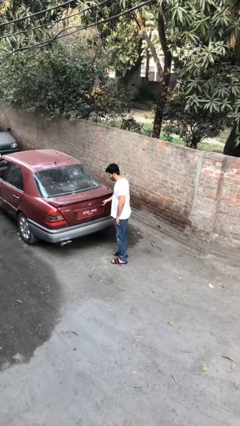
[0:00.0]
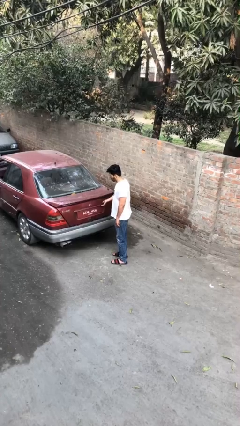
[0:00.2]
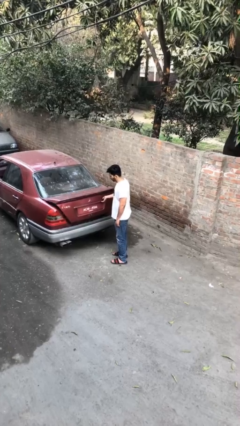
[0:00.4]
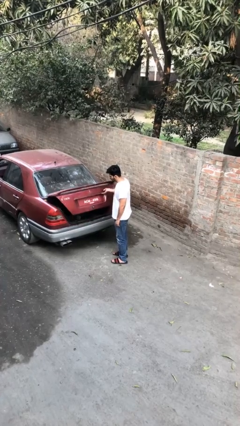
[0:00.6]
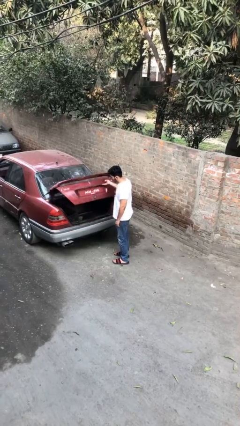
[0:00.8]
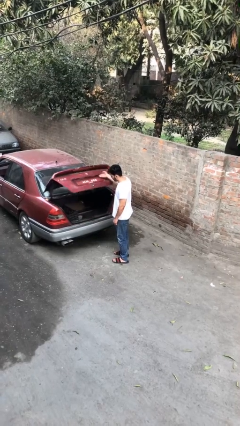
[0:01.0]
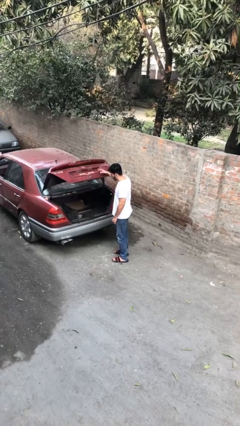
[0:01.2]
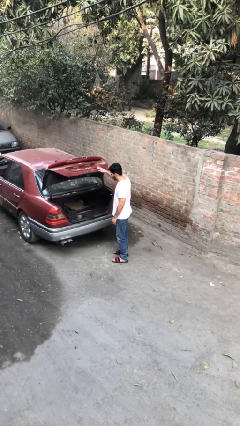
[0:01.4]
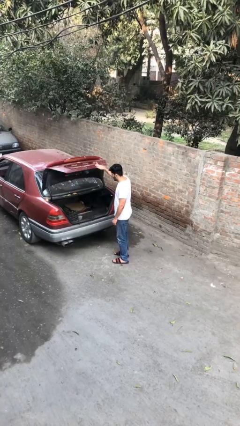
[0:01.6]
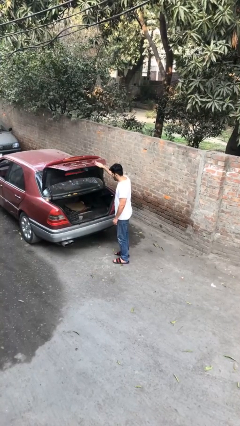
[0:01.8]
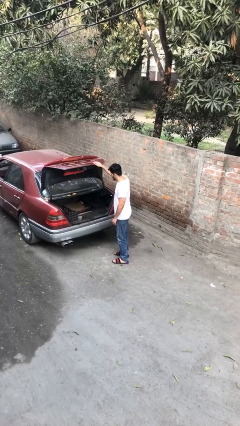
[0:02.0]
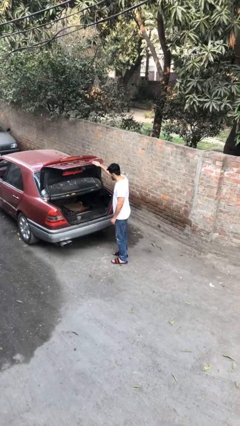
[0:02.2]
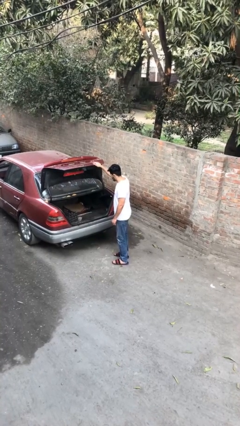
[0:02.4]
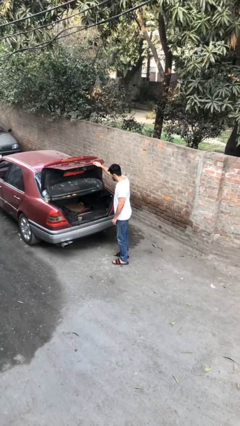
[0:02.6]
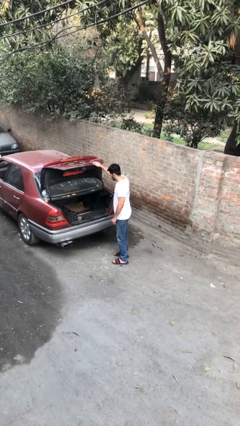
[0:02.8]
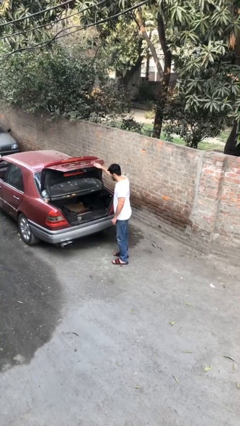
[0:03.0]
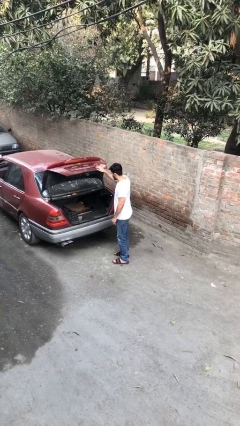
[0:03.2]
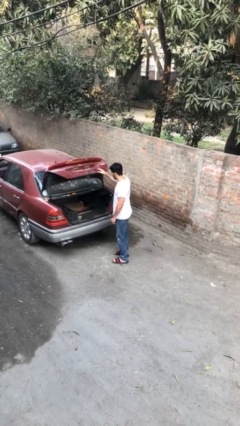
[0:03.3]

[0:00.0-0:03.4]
person opens car trunk

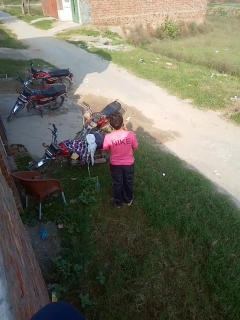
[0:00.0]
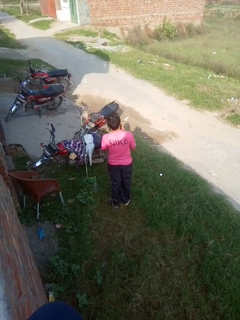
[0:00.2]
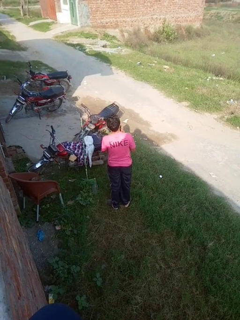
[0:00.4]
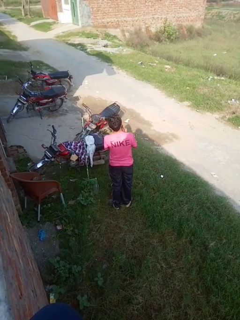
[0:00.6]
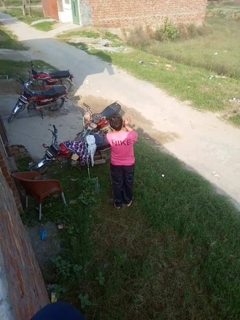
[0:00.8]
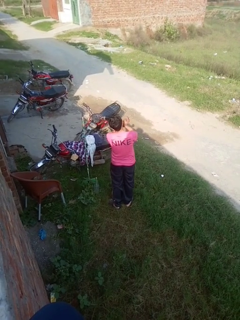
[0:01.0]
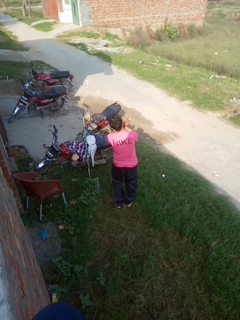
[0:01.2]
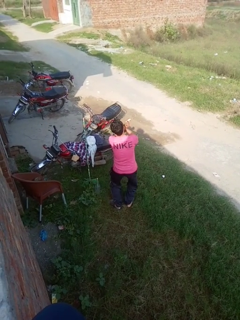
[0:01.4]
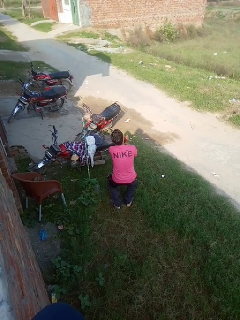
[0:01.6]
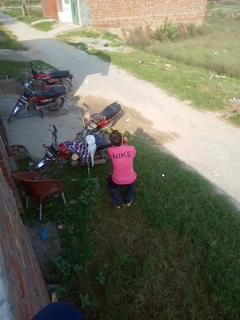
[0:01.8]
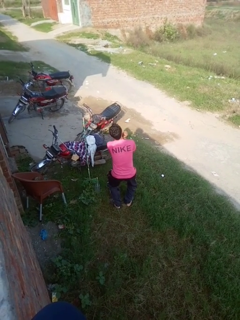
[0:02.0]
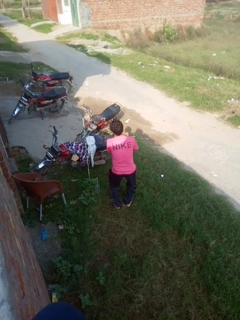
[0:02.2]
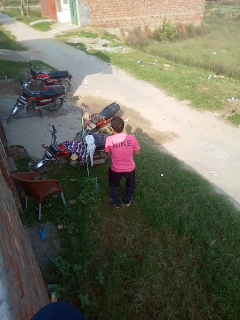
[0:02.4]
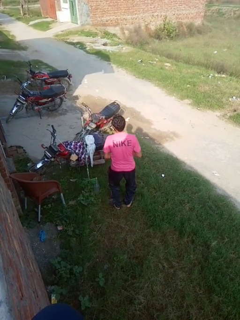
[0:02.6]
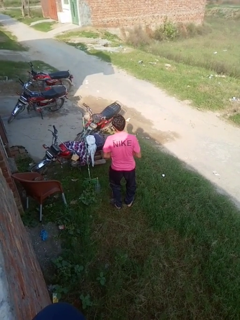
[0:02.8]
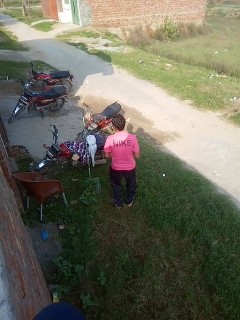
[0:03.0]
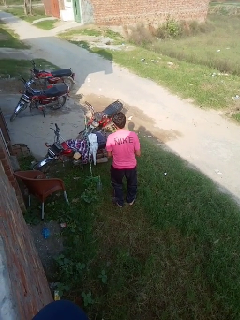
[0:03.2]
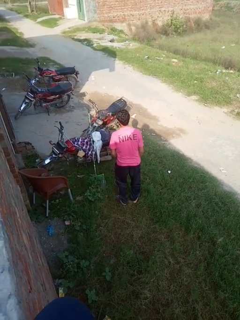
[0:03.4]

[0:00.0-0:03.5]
person karate chop

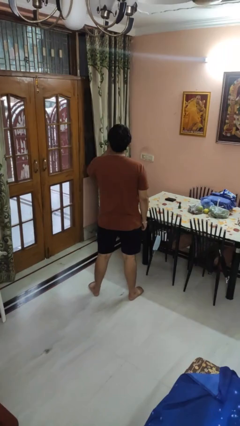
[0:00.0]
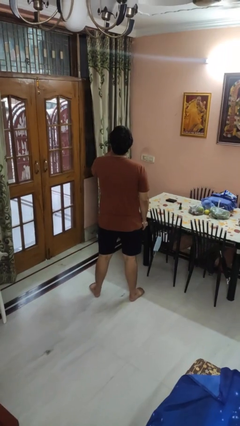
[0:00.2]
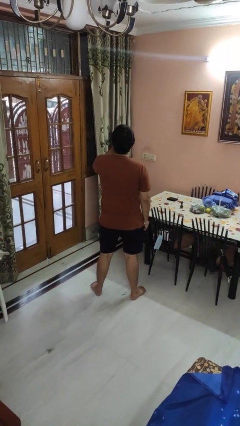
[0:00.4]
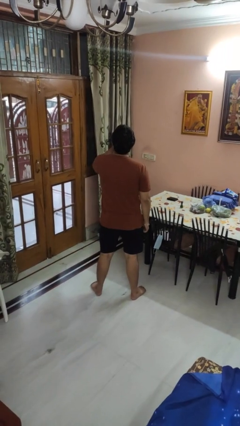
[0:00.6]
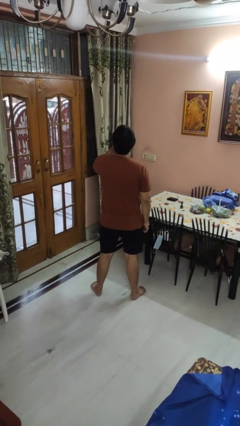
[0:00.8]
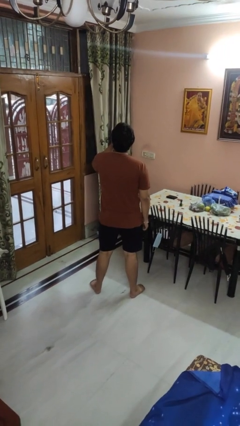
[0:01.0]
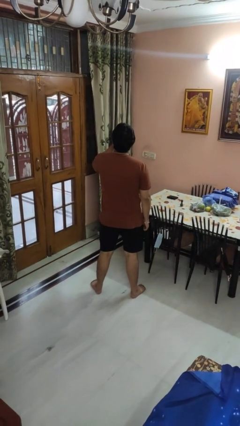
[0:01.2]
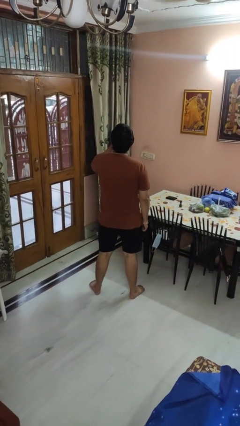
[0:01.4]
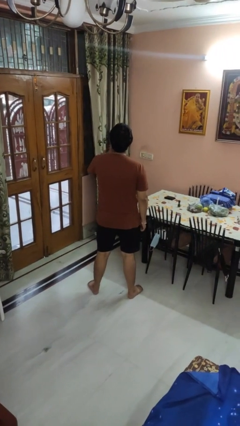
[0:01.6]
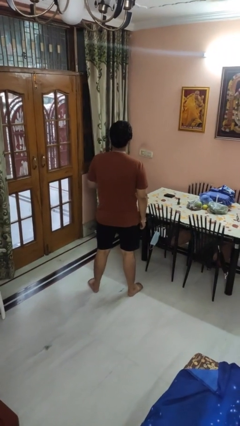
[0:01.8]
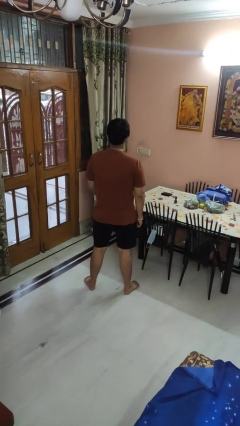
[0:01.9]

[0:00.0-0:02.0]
person strokes chin

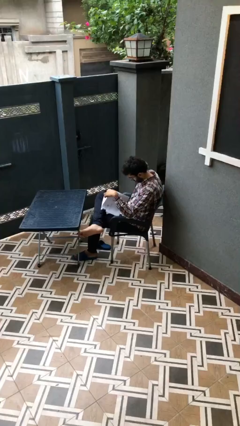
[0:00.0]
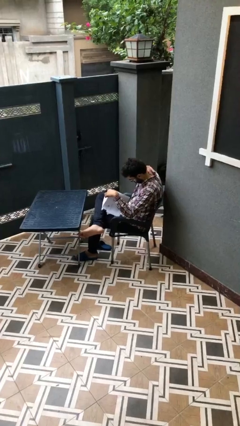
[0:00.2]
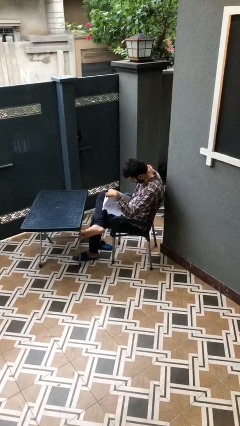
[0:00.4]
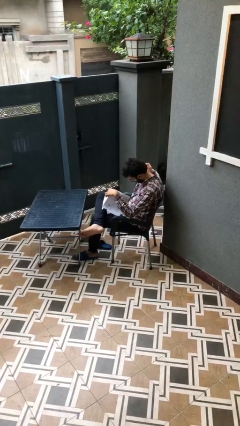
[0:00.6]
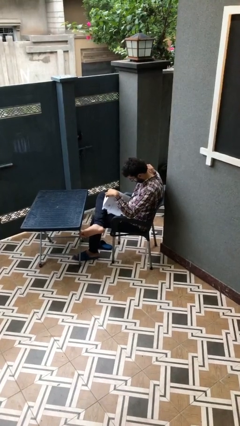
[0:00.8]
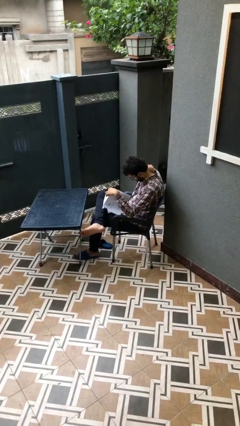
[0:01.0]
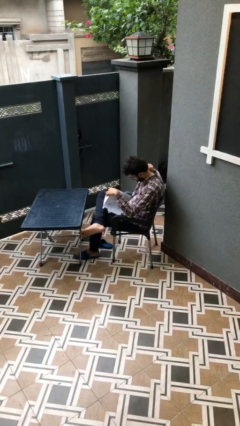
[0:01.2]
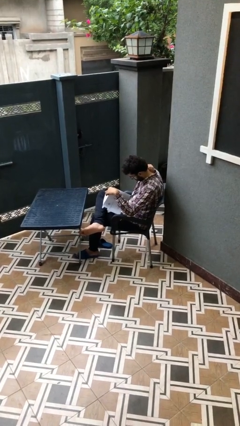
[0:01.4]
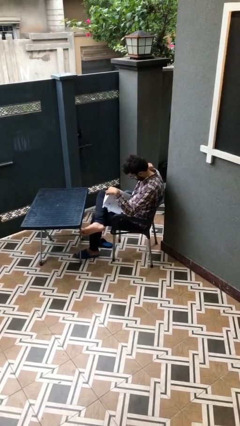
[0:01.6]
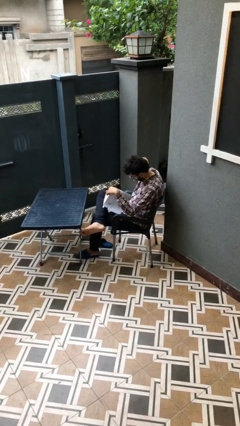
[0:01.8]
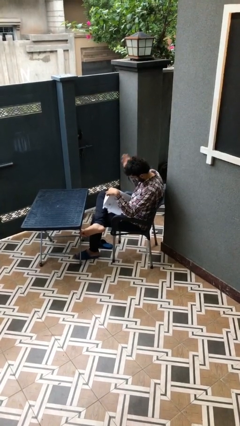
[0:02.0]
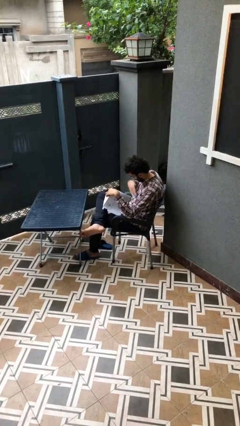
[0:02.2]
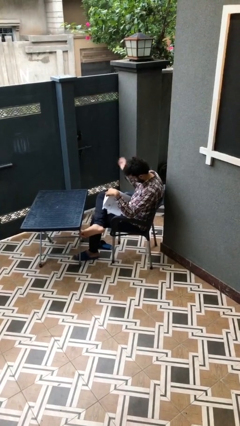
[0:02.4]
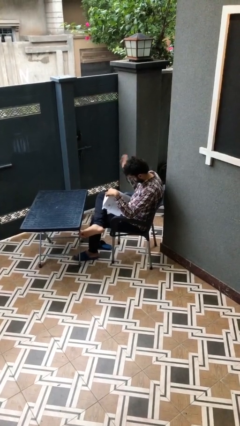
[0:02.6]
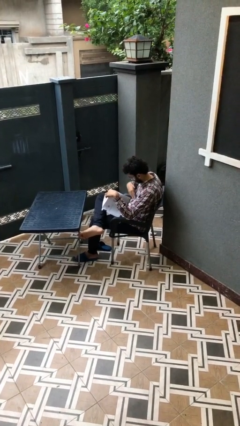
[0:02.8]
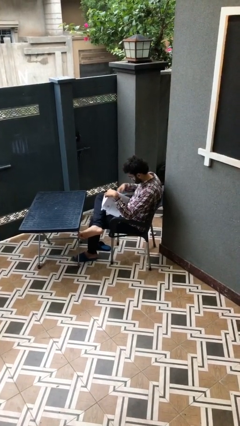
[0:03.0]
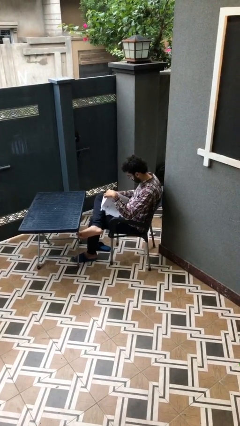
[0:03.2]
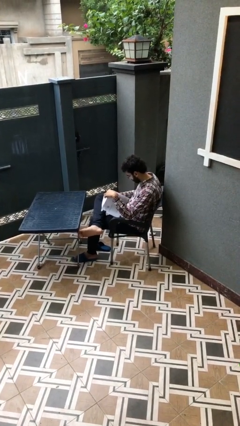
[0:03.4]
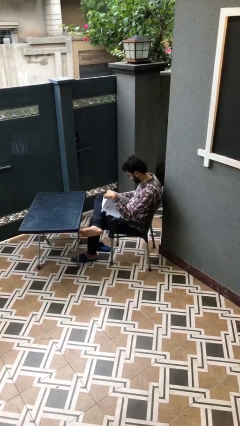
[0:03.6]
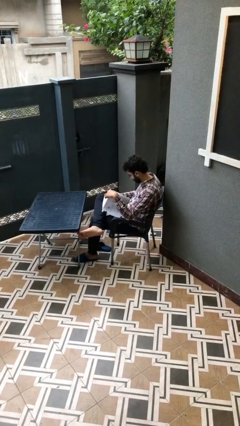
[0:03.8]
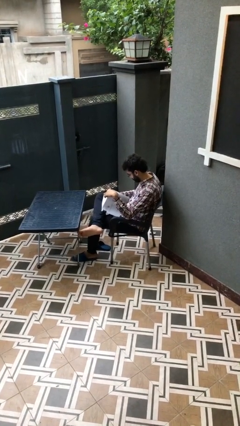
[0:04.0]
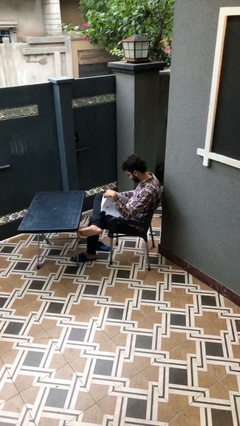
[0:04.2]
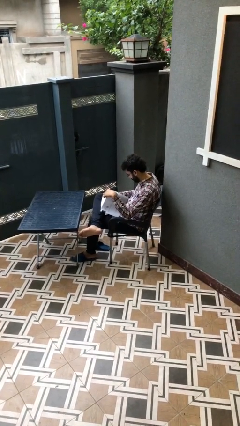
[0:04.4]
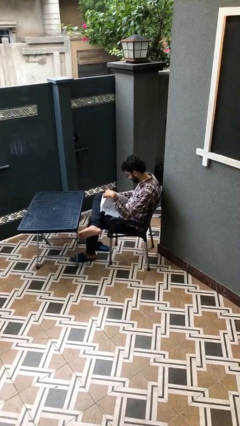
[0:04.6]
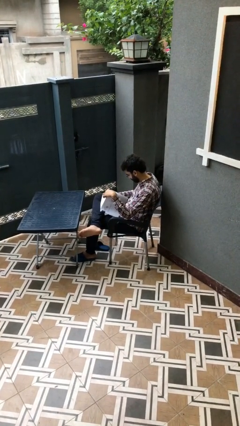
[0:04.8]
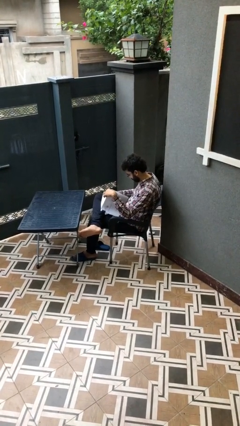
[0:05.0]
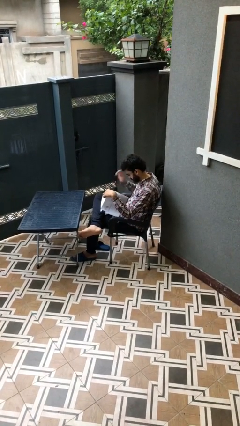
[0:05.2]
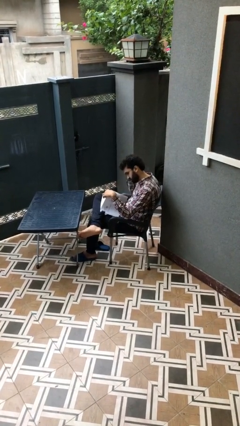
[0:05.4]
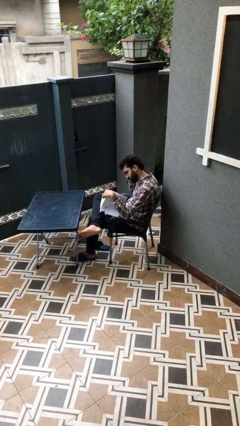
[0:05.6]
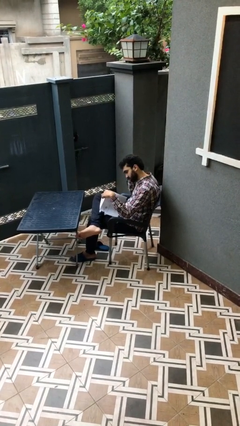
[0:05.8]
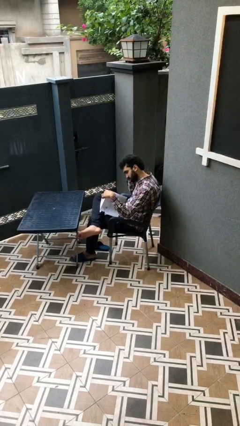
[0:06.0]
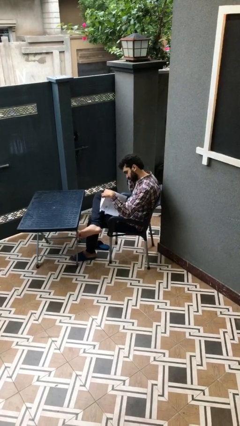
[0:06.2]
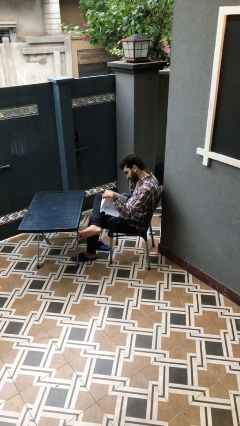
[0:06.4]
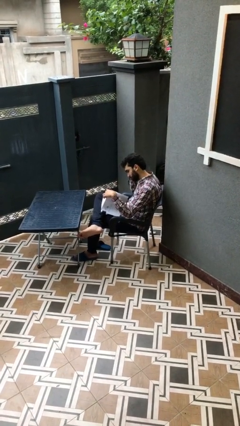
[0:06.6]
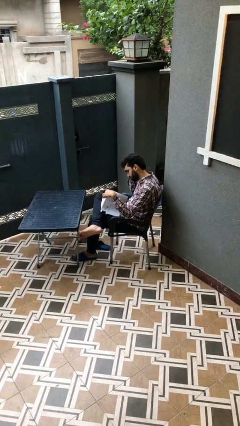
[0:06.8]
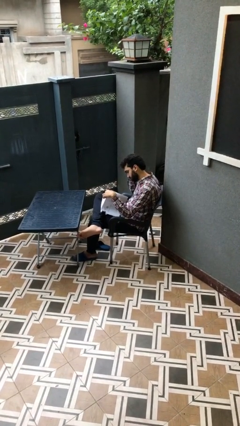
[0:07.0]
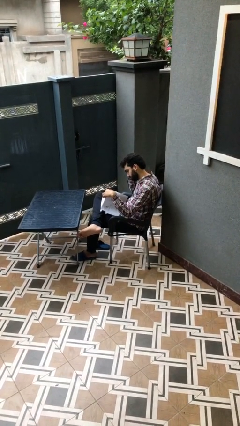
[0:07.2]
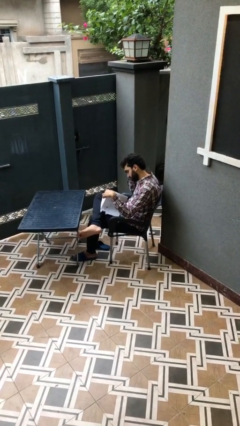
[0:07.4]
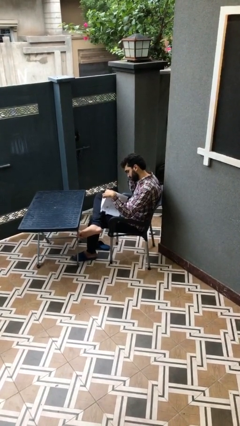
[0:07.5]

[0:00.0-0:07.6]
person reads document

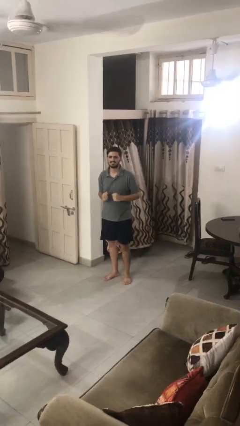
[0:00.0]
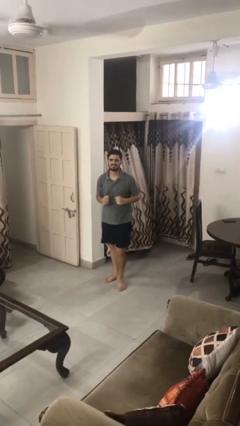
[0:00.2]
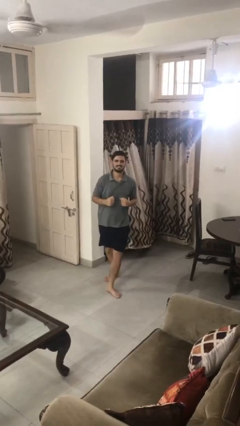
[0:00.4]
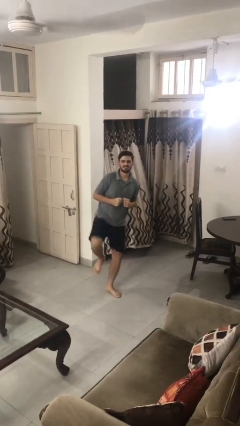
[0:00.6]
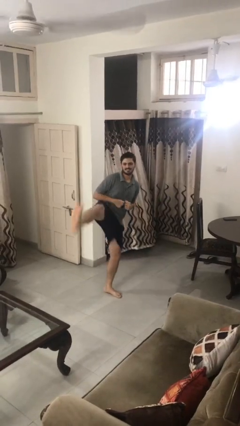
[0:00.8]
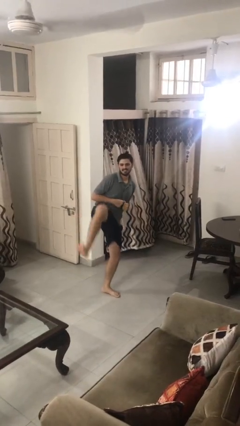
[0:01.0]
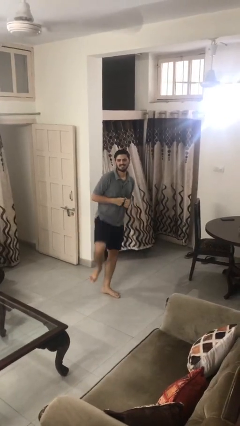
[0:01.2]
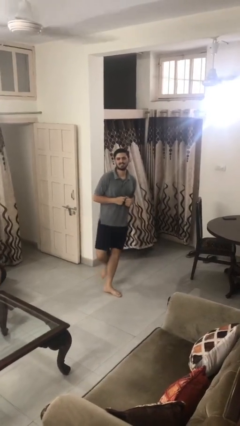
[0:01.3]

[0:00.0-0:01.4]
person karate kicks

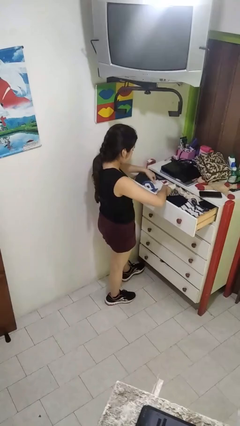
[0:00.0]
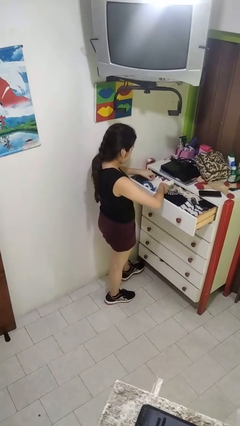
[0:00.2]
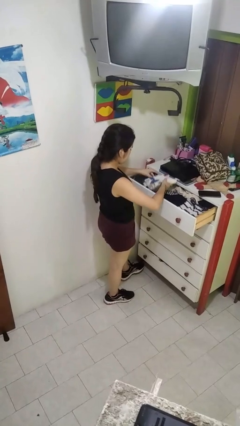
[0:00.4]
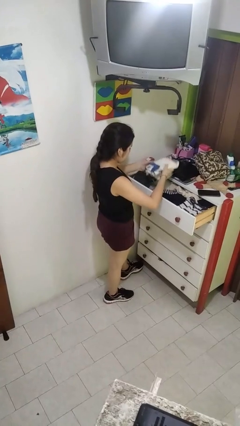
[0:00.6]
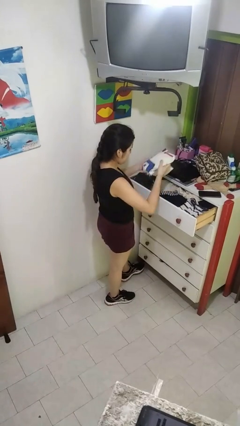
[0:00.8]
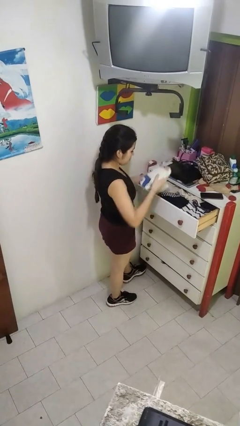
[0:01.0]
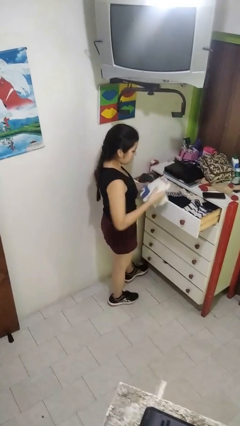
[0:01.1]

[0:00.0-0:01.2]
person takes clothes from dresser
